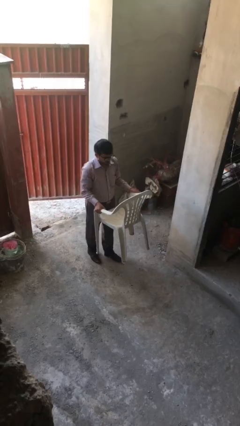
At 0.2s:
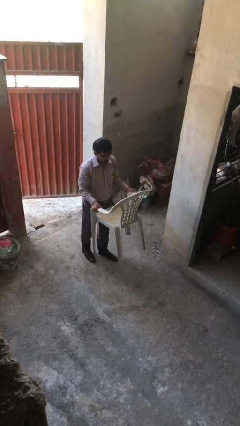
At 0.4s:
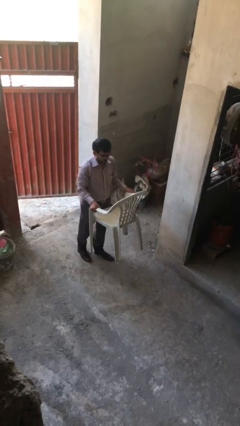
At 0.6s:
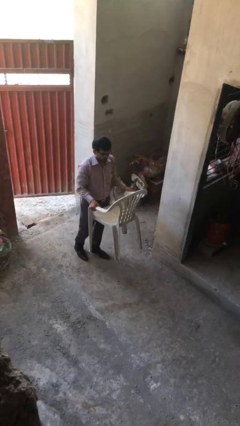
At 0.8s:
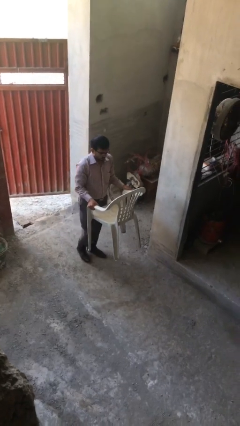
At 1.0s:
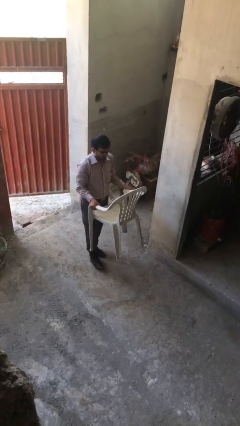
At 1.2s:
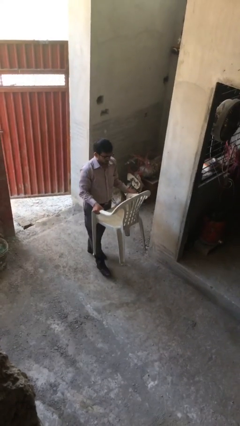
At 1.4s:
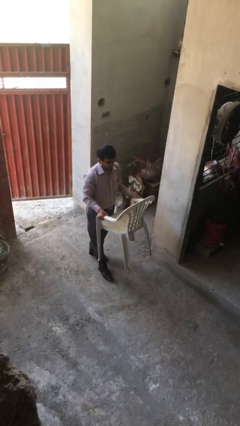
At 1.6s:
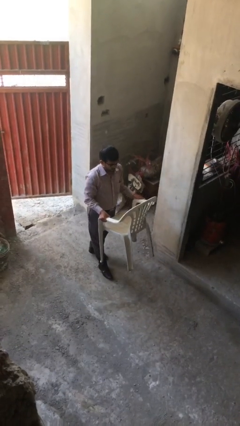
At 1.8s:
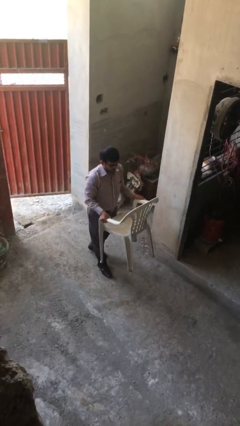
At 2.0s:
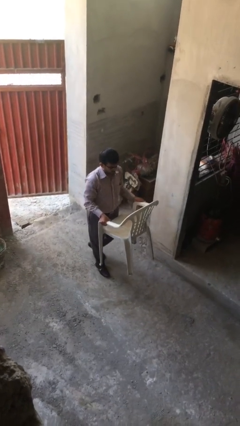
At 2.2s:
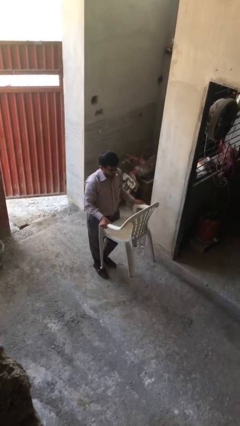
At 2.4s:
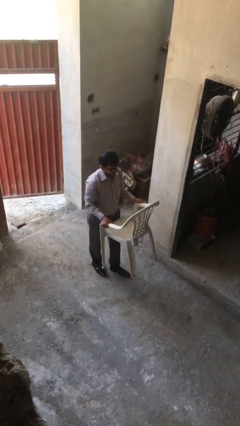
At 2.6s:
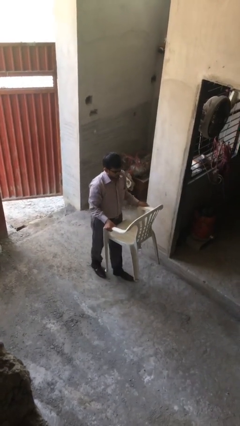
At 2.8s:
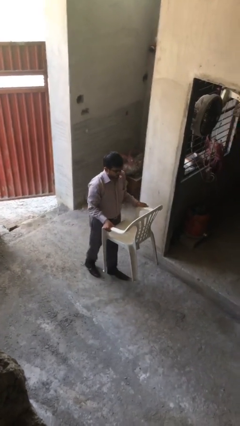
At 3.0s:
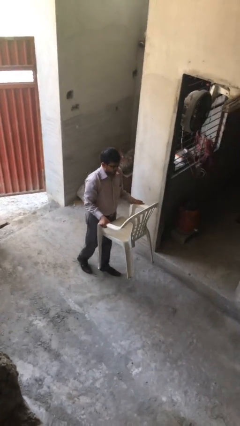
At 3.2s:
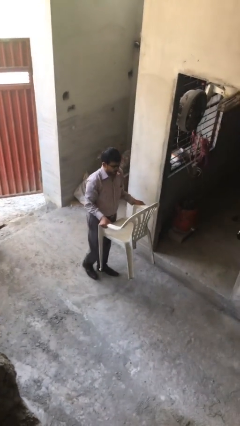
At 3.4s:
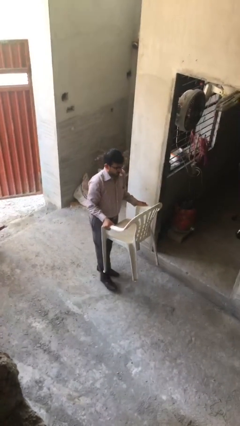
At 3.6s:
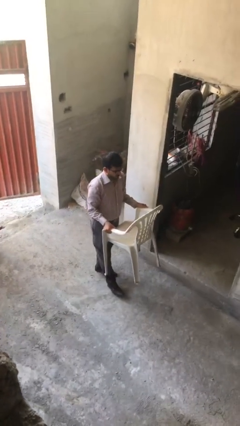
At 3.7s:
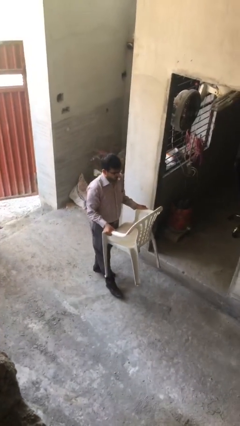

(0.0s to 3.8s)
person carries heavy object

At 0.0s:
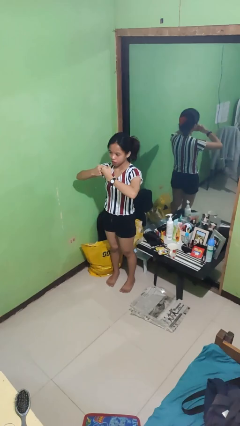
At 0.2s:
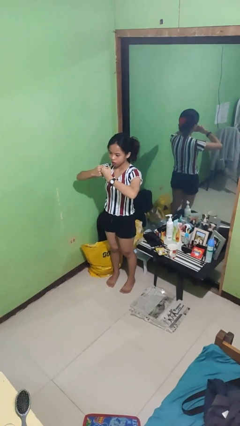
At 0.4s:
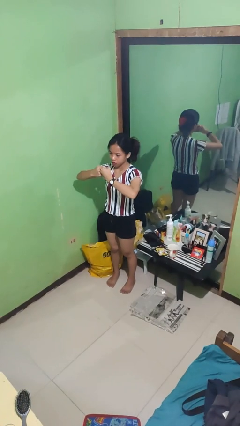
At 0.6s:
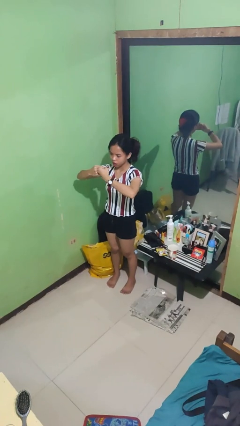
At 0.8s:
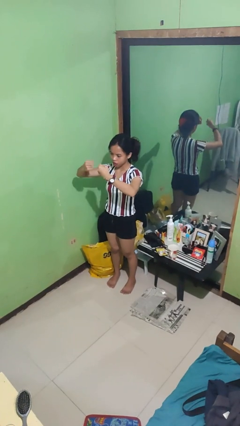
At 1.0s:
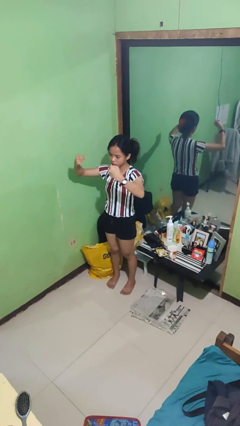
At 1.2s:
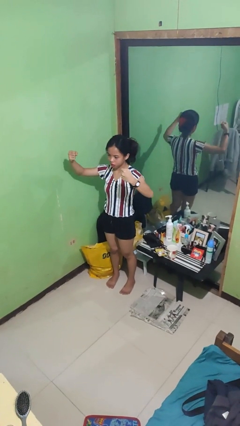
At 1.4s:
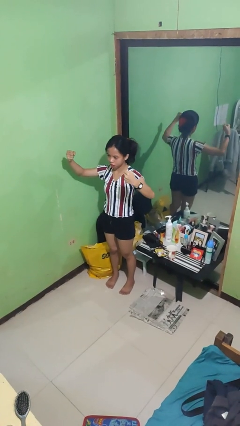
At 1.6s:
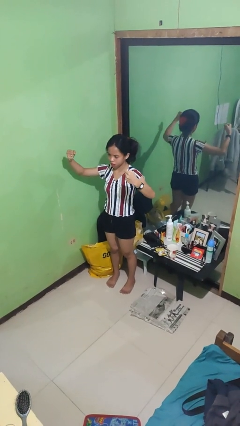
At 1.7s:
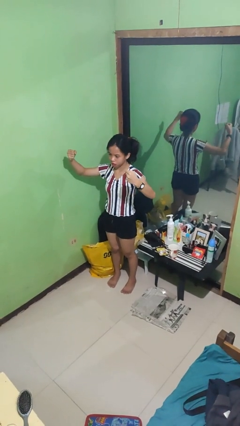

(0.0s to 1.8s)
person gestures zoom in

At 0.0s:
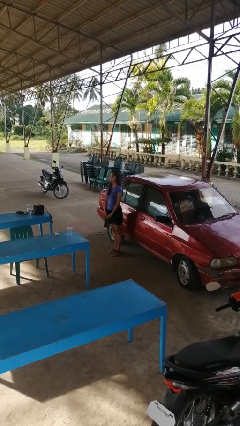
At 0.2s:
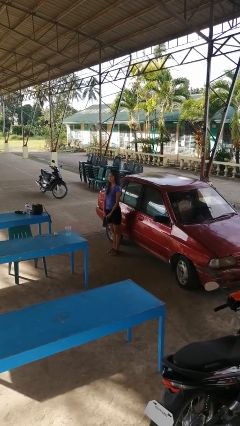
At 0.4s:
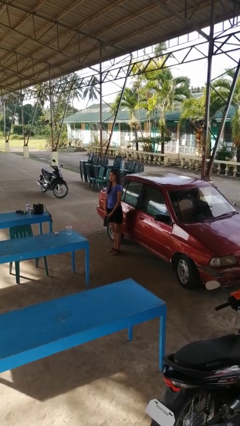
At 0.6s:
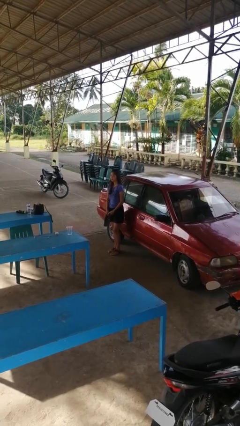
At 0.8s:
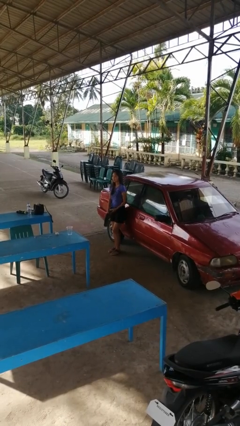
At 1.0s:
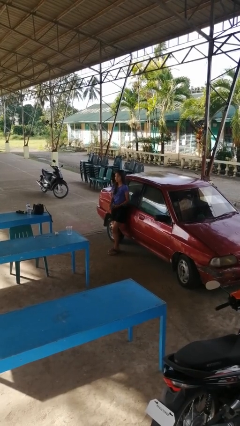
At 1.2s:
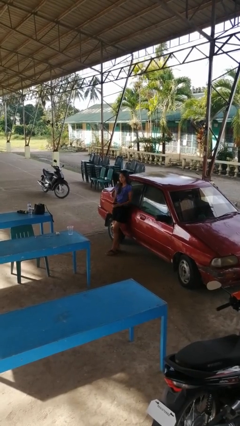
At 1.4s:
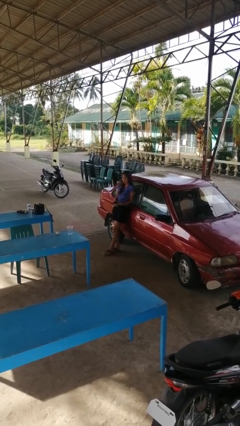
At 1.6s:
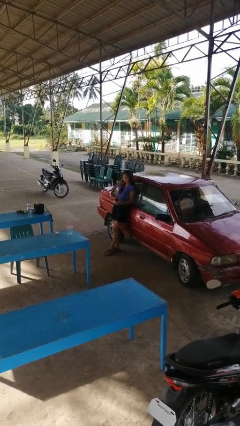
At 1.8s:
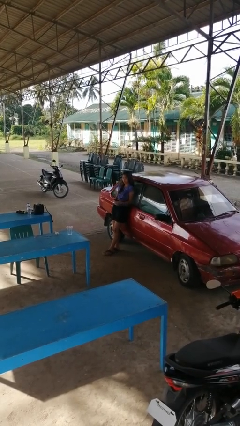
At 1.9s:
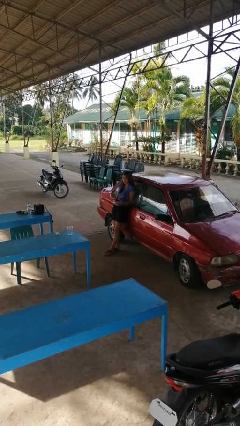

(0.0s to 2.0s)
person leans against car

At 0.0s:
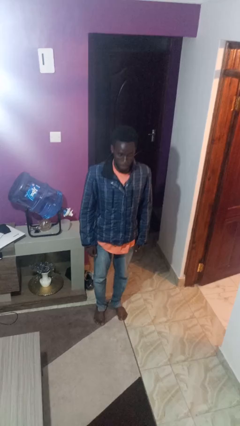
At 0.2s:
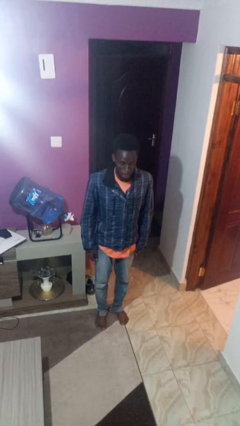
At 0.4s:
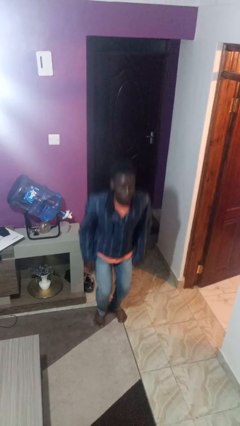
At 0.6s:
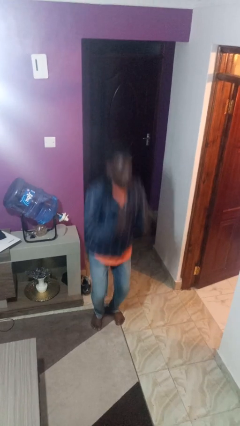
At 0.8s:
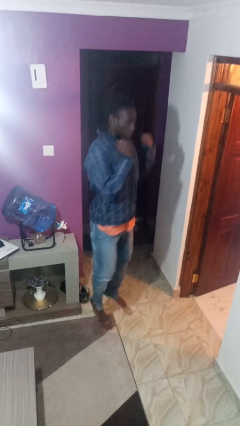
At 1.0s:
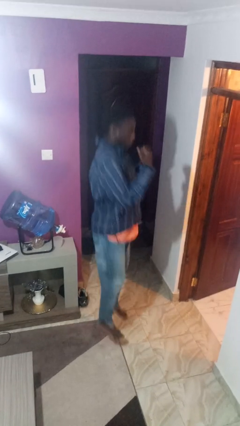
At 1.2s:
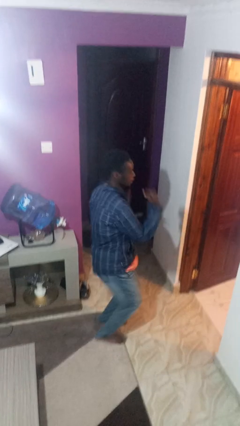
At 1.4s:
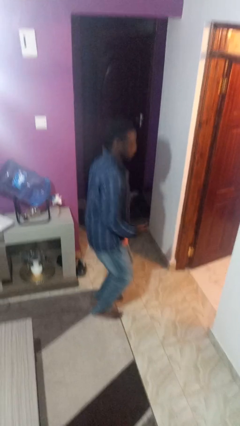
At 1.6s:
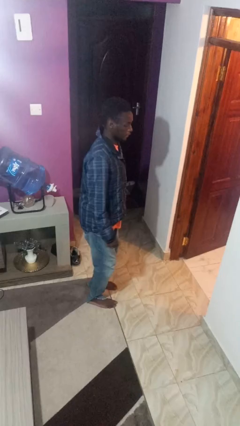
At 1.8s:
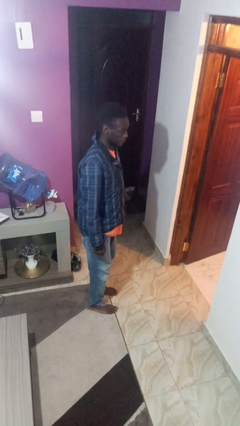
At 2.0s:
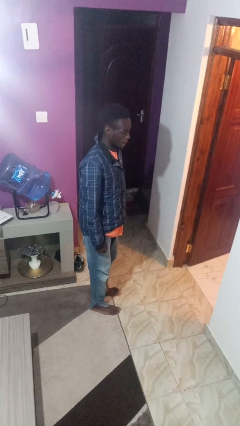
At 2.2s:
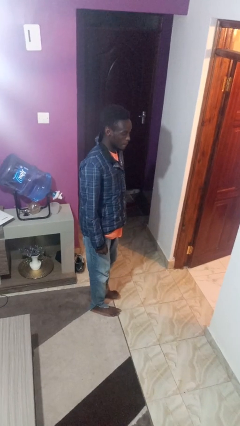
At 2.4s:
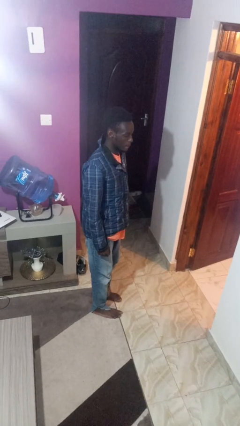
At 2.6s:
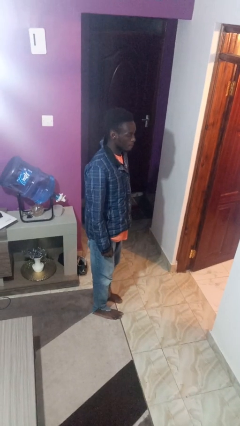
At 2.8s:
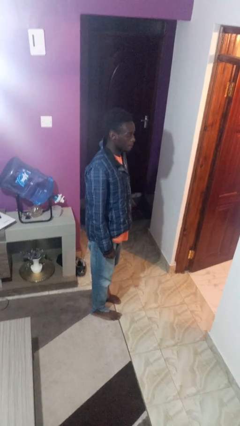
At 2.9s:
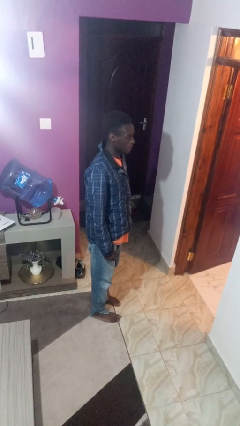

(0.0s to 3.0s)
person jumps

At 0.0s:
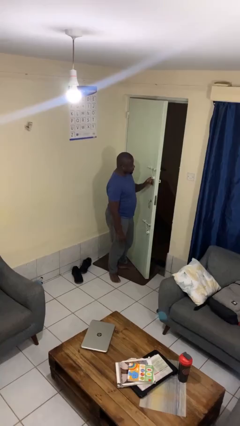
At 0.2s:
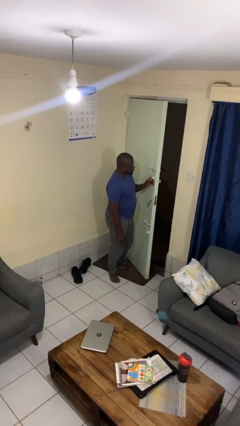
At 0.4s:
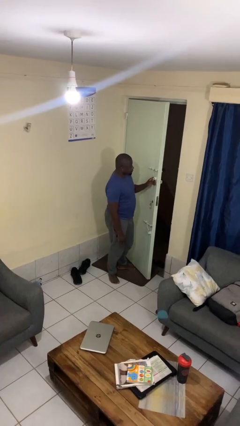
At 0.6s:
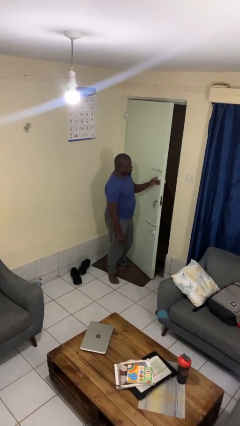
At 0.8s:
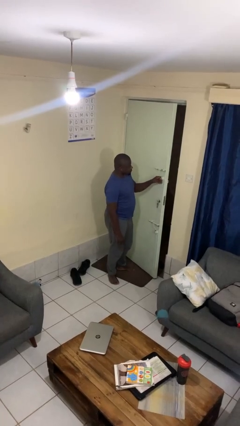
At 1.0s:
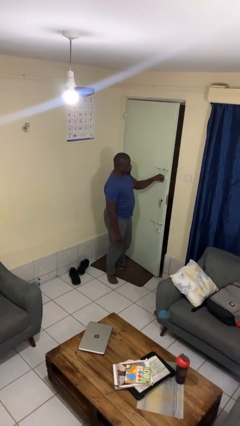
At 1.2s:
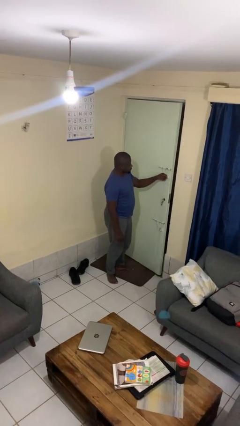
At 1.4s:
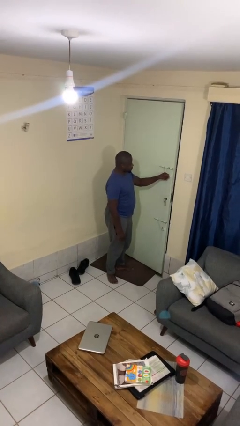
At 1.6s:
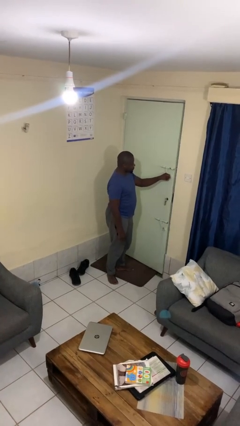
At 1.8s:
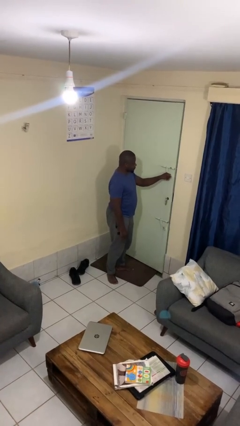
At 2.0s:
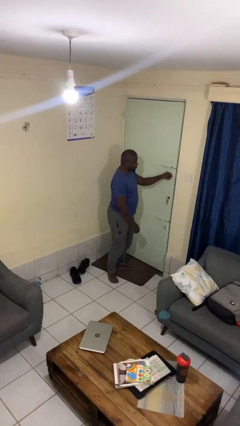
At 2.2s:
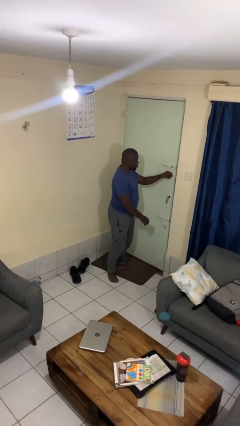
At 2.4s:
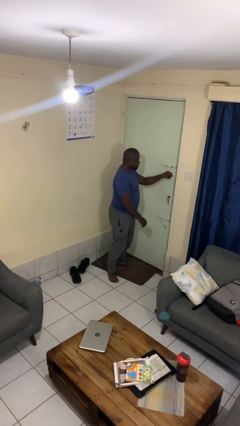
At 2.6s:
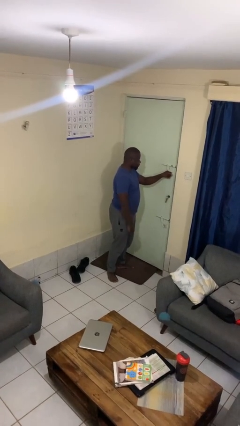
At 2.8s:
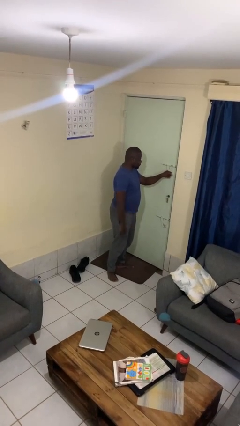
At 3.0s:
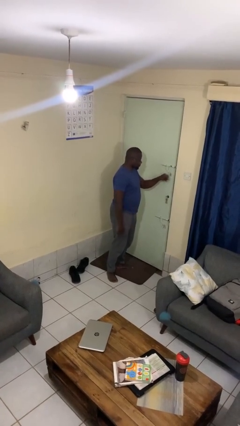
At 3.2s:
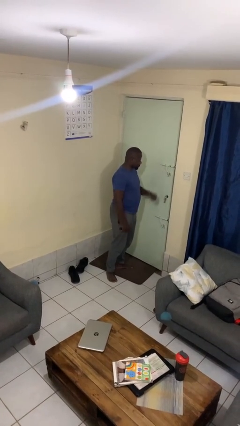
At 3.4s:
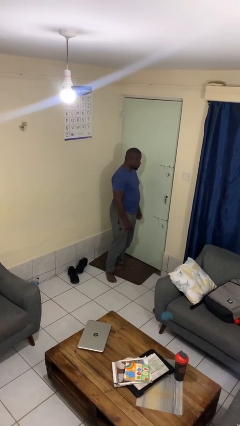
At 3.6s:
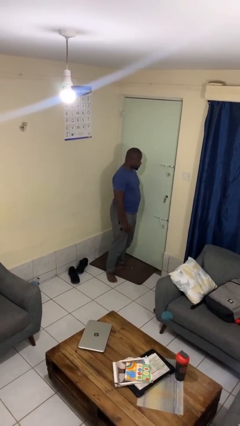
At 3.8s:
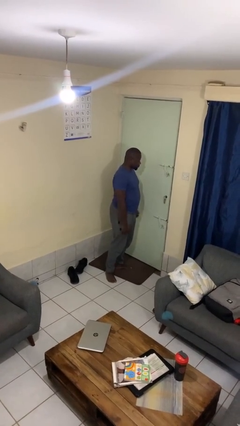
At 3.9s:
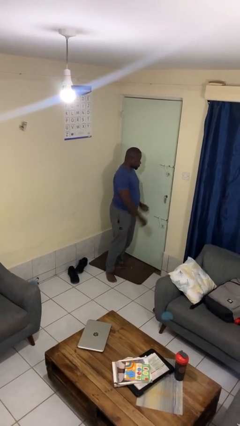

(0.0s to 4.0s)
person closes facility door

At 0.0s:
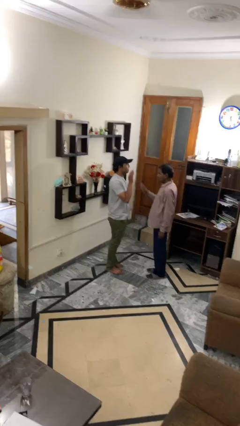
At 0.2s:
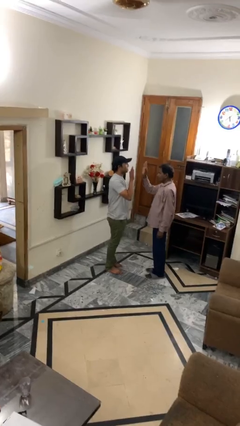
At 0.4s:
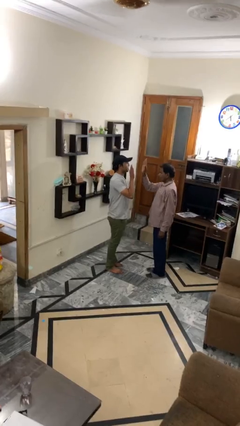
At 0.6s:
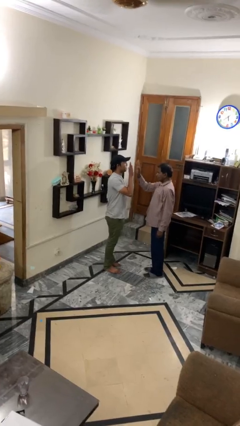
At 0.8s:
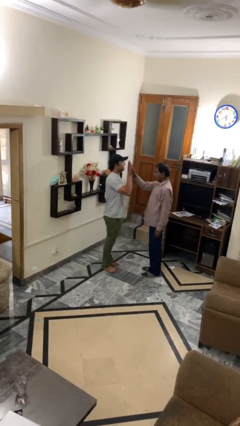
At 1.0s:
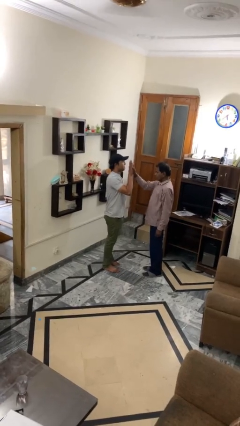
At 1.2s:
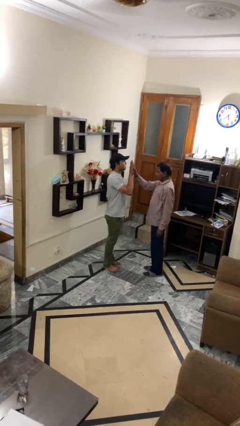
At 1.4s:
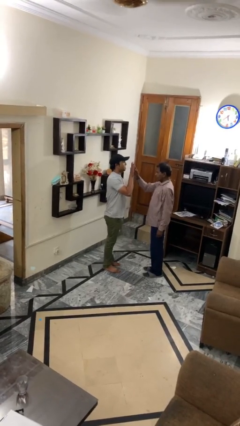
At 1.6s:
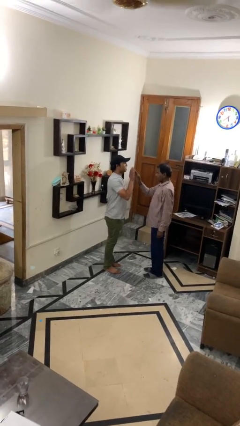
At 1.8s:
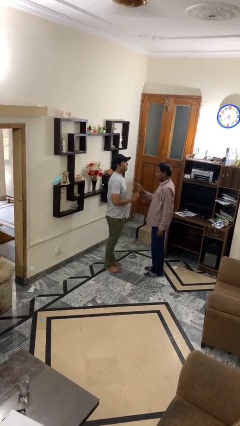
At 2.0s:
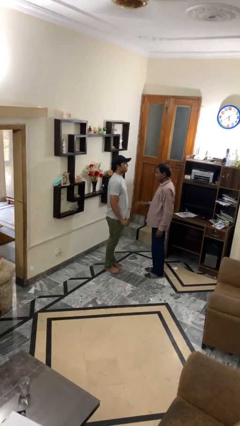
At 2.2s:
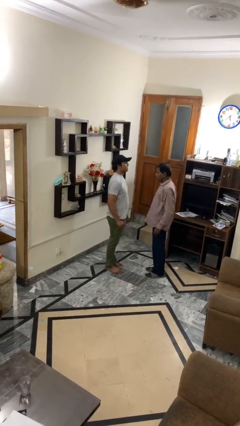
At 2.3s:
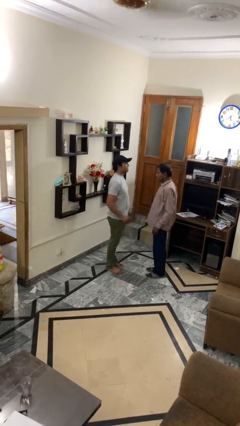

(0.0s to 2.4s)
person highfives hand

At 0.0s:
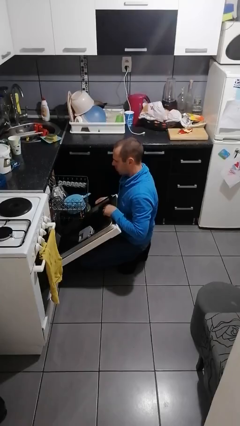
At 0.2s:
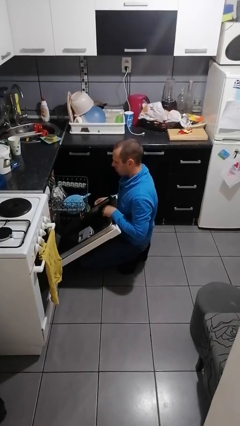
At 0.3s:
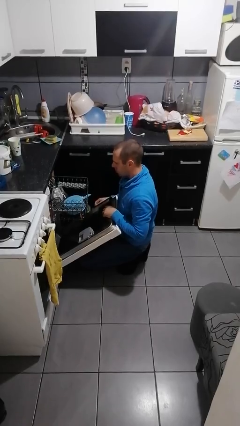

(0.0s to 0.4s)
person unloads dishwasher
